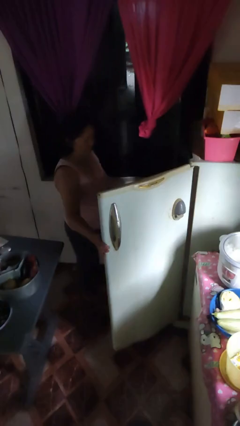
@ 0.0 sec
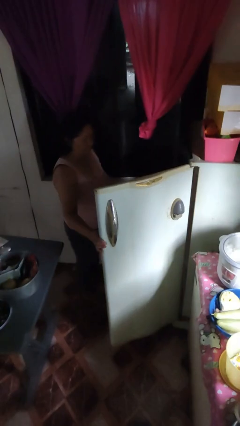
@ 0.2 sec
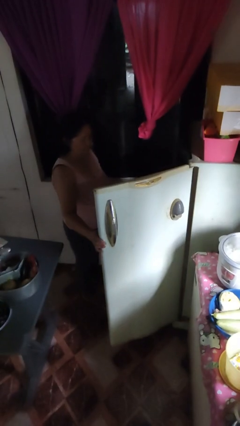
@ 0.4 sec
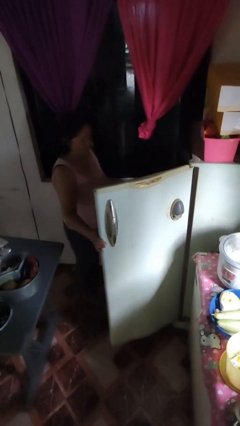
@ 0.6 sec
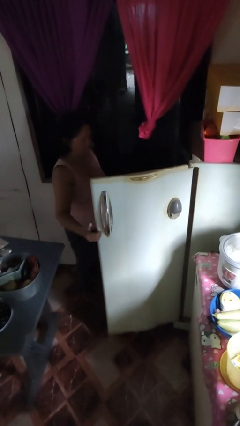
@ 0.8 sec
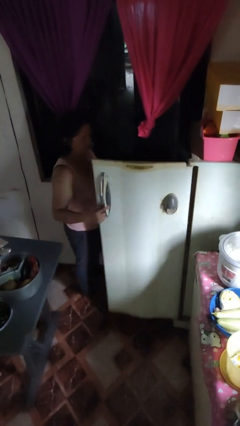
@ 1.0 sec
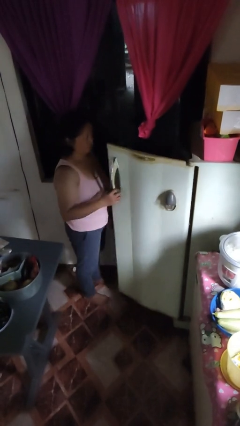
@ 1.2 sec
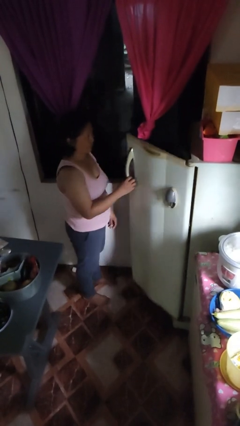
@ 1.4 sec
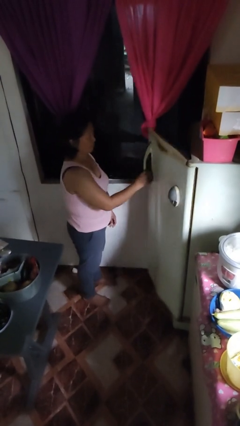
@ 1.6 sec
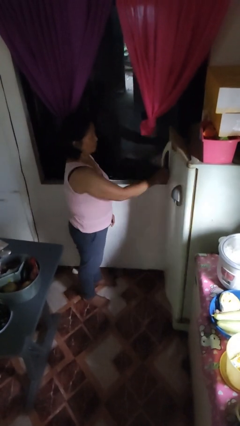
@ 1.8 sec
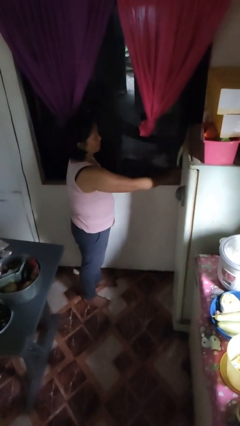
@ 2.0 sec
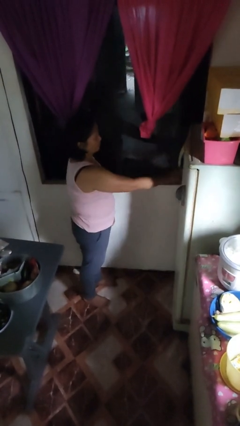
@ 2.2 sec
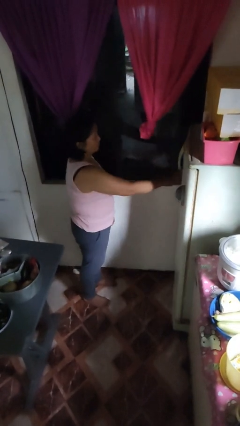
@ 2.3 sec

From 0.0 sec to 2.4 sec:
person closes refrigerator

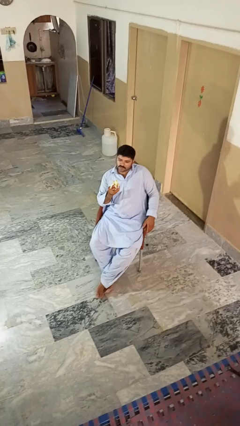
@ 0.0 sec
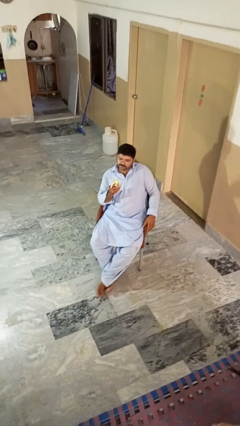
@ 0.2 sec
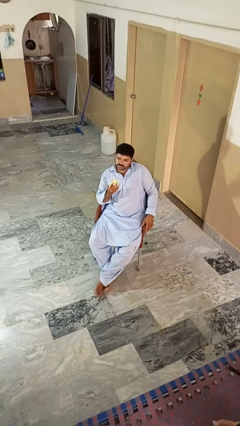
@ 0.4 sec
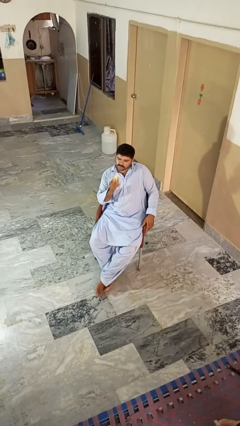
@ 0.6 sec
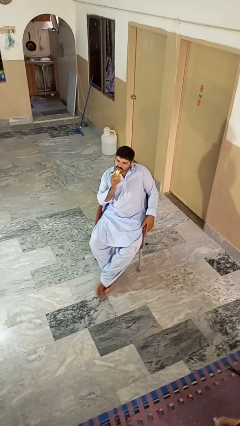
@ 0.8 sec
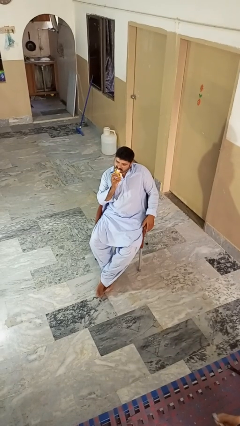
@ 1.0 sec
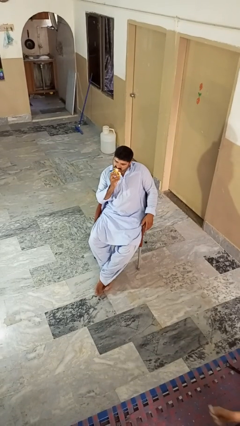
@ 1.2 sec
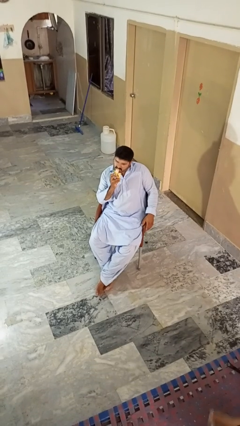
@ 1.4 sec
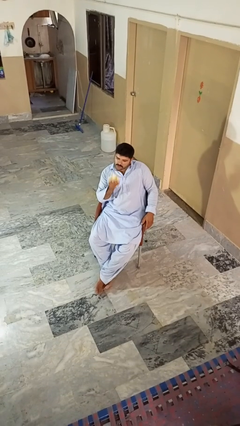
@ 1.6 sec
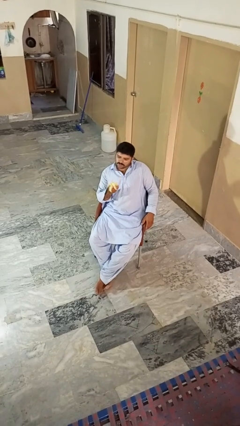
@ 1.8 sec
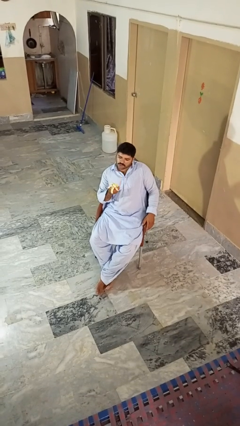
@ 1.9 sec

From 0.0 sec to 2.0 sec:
person eats banana

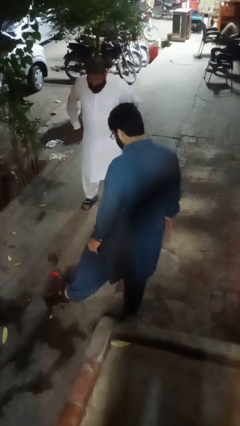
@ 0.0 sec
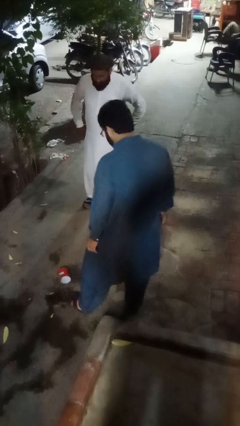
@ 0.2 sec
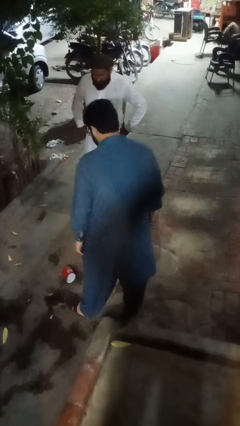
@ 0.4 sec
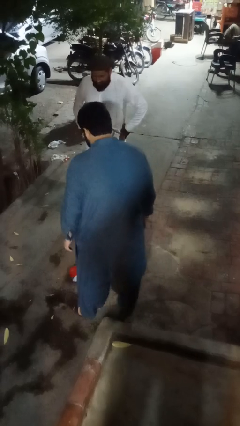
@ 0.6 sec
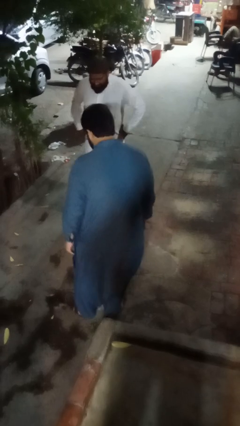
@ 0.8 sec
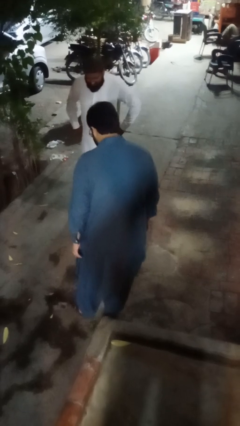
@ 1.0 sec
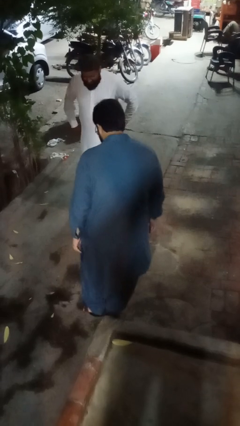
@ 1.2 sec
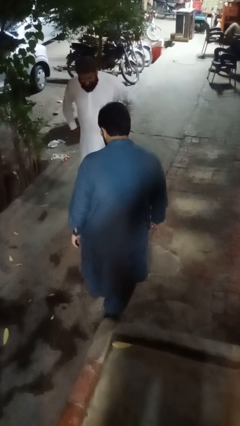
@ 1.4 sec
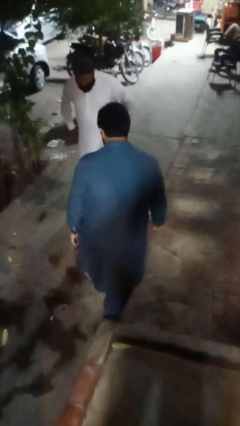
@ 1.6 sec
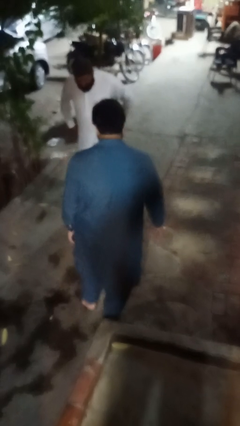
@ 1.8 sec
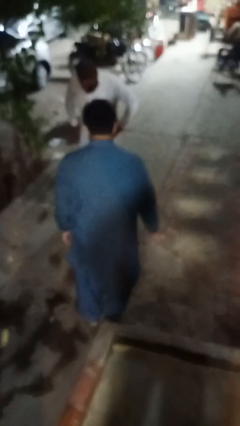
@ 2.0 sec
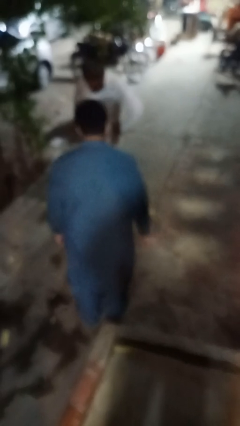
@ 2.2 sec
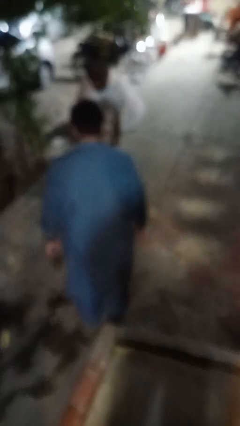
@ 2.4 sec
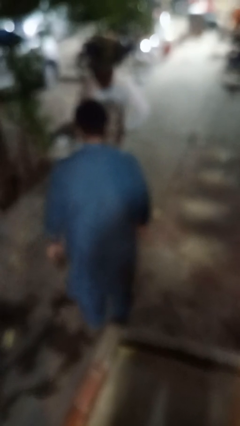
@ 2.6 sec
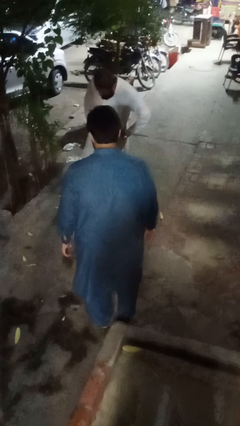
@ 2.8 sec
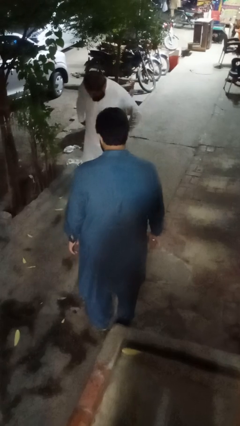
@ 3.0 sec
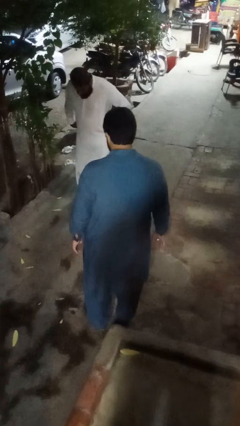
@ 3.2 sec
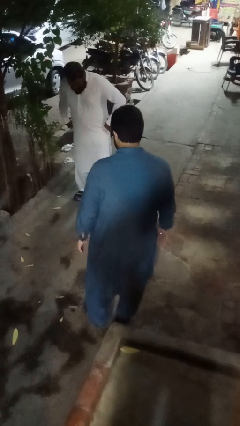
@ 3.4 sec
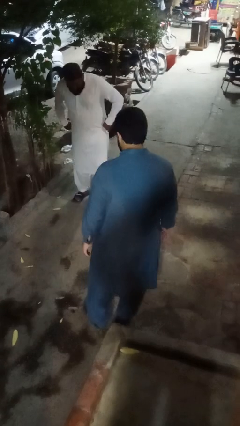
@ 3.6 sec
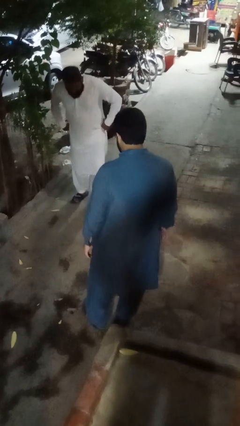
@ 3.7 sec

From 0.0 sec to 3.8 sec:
person kicks object to person

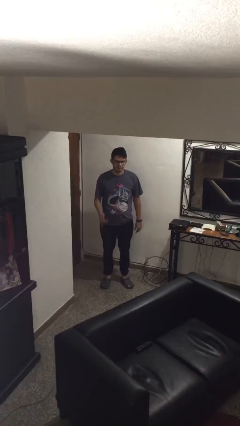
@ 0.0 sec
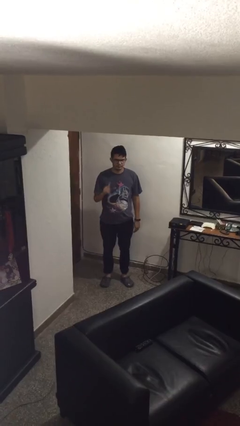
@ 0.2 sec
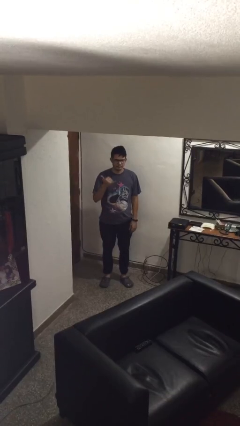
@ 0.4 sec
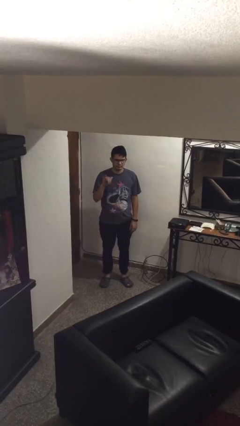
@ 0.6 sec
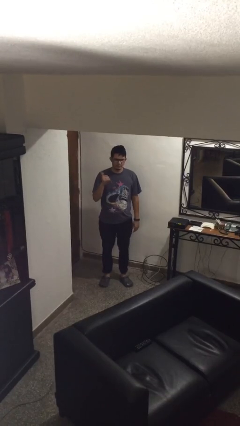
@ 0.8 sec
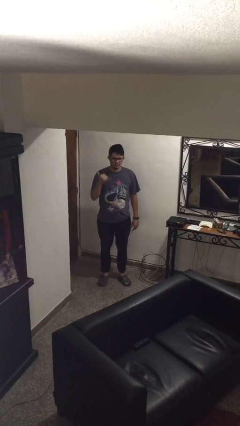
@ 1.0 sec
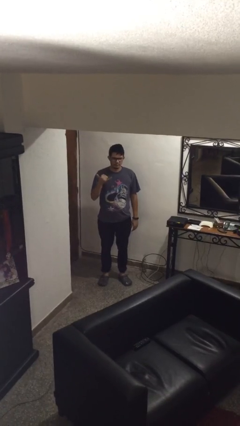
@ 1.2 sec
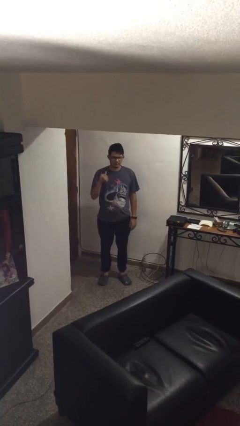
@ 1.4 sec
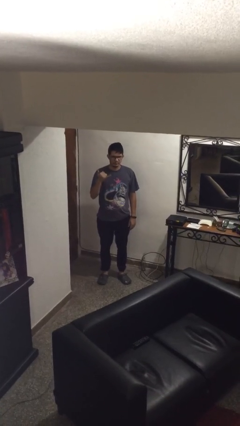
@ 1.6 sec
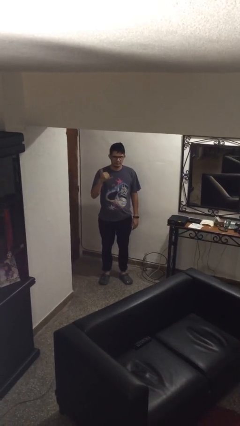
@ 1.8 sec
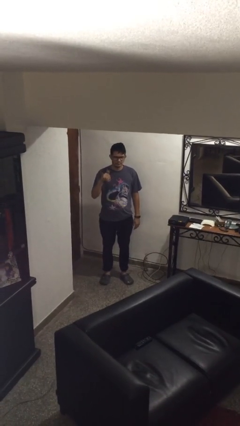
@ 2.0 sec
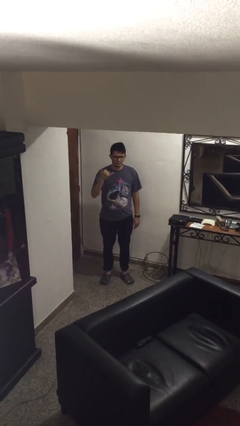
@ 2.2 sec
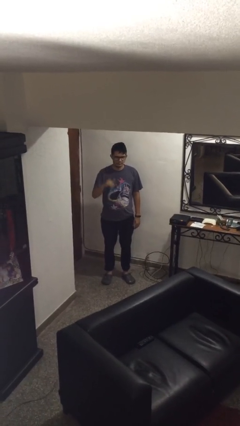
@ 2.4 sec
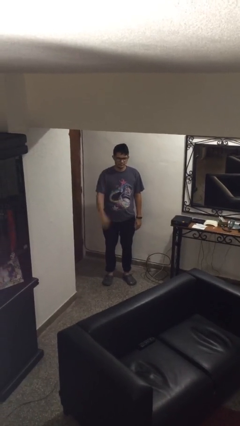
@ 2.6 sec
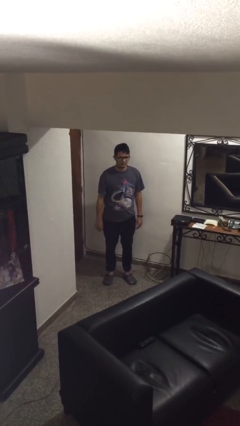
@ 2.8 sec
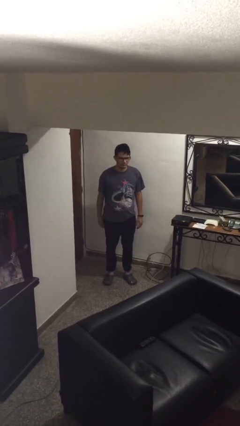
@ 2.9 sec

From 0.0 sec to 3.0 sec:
person gestures hang loose

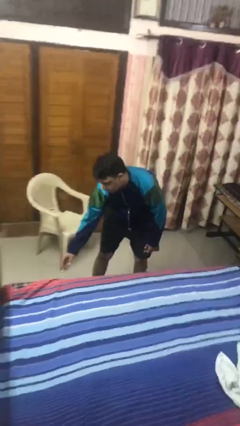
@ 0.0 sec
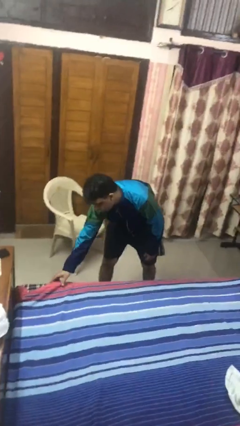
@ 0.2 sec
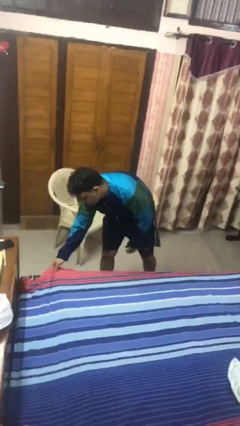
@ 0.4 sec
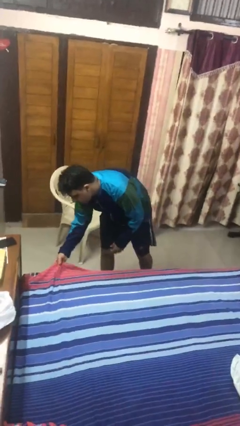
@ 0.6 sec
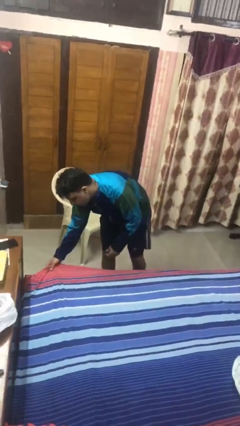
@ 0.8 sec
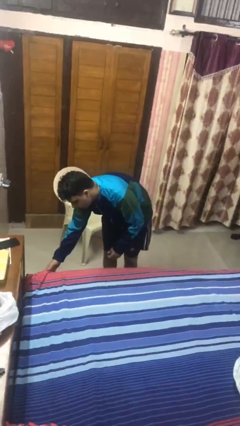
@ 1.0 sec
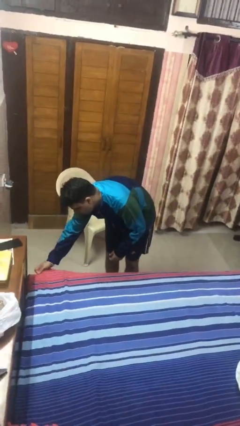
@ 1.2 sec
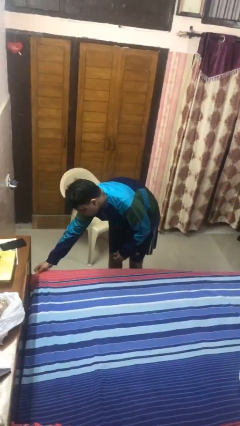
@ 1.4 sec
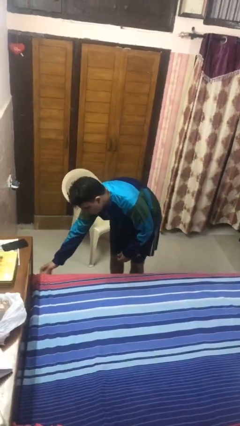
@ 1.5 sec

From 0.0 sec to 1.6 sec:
person makes bed

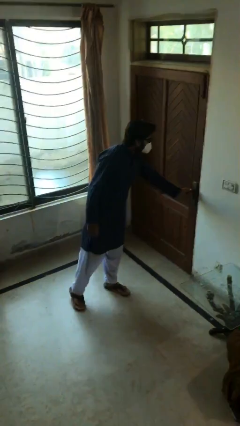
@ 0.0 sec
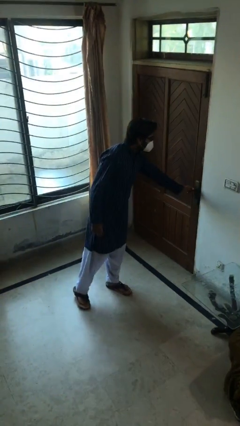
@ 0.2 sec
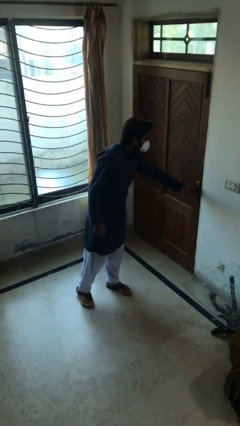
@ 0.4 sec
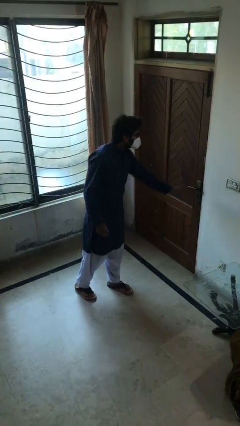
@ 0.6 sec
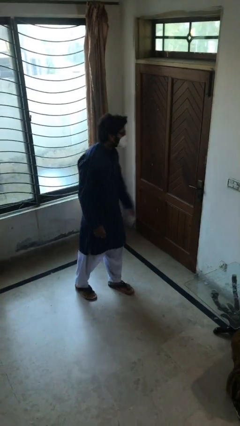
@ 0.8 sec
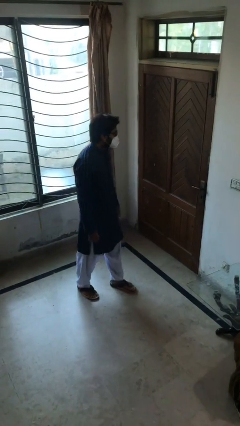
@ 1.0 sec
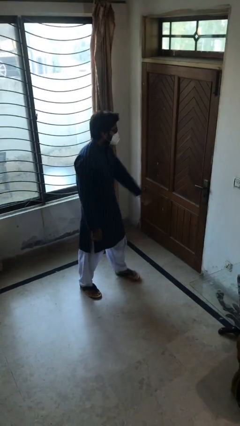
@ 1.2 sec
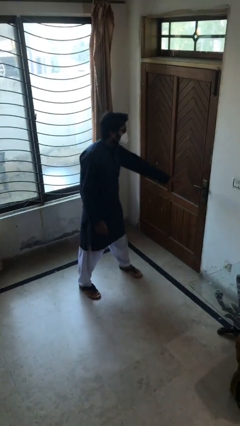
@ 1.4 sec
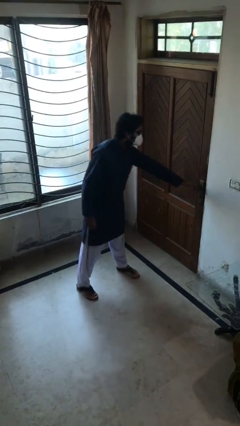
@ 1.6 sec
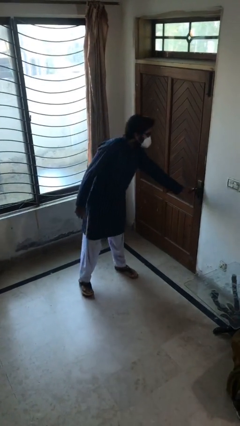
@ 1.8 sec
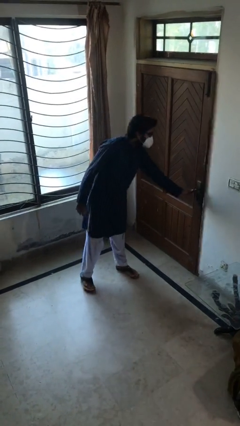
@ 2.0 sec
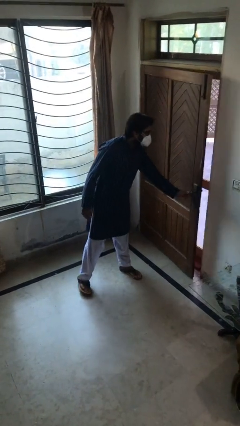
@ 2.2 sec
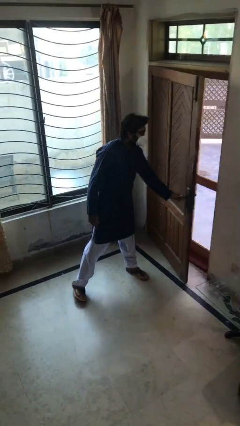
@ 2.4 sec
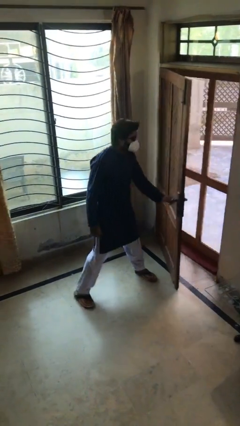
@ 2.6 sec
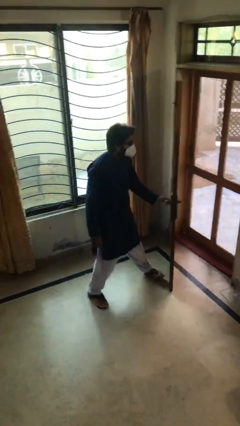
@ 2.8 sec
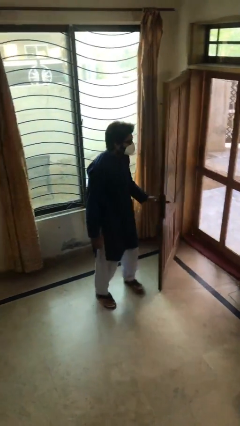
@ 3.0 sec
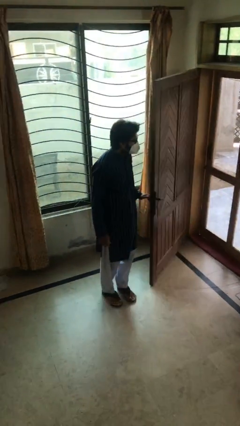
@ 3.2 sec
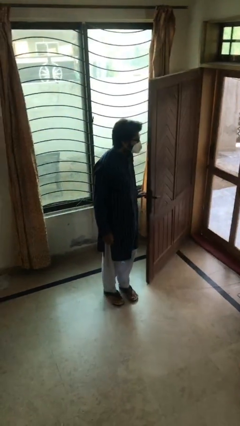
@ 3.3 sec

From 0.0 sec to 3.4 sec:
person opens facility door

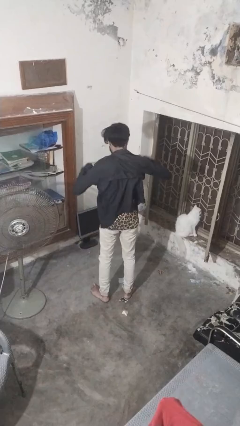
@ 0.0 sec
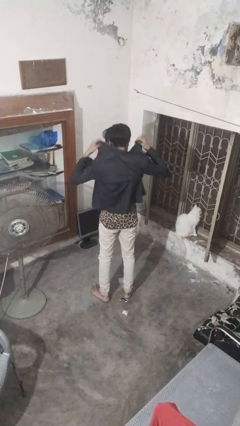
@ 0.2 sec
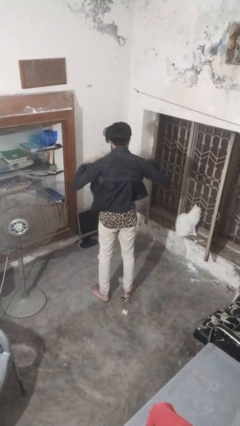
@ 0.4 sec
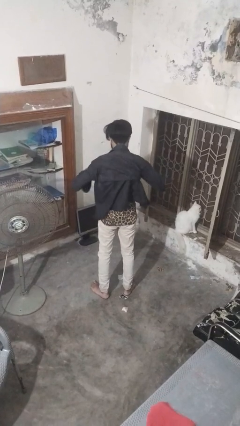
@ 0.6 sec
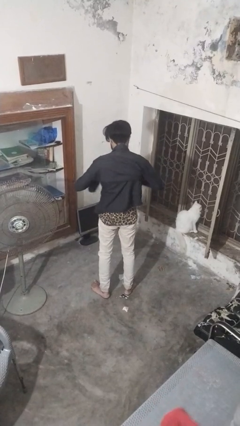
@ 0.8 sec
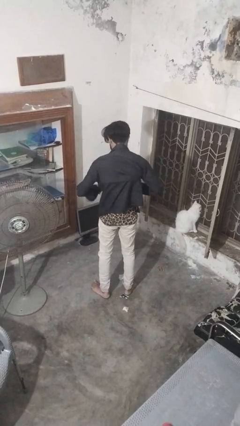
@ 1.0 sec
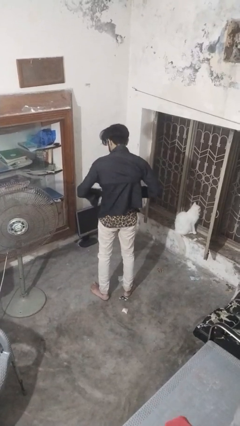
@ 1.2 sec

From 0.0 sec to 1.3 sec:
person takes off shirt
